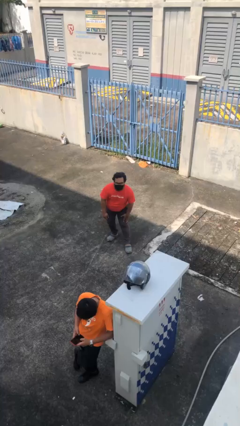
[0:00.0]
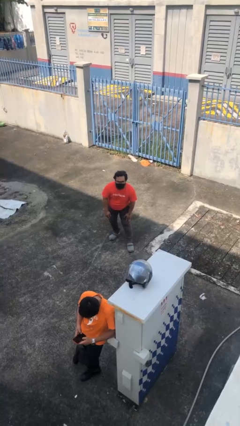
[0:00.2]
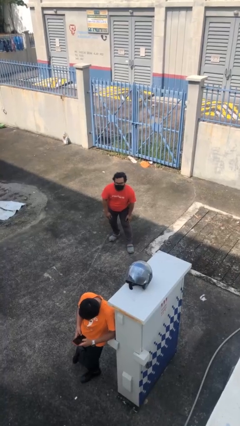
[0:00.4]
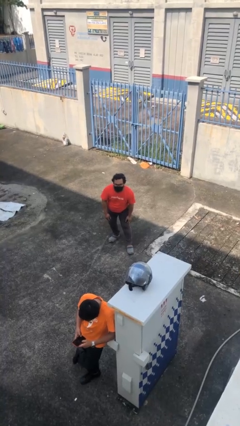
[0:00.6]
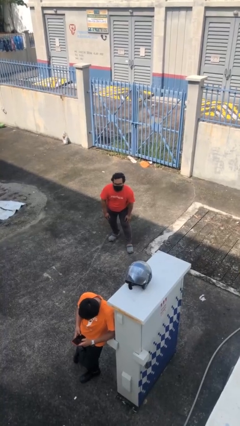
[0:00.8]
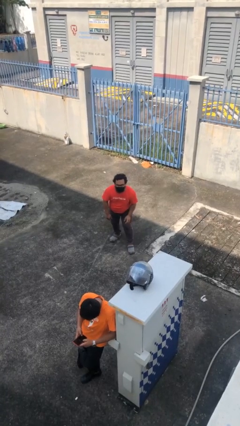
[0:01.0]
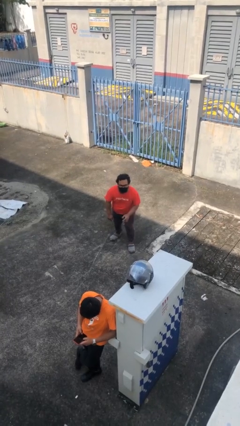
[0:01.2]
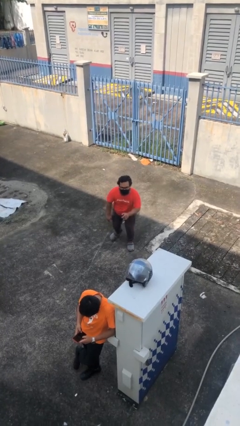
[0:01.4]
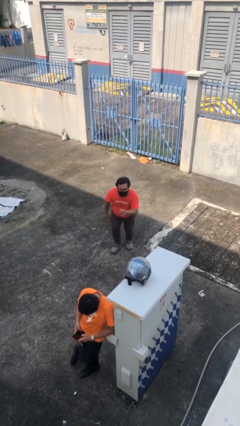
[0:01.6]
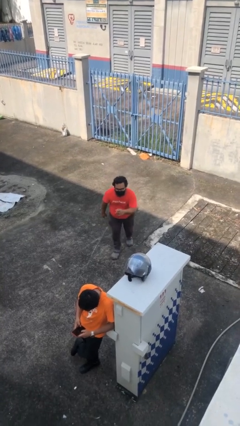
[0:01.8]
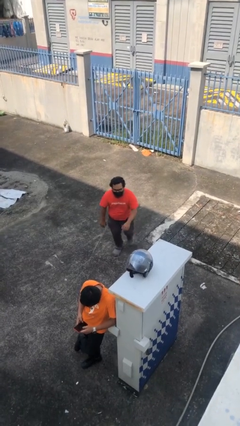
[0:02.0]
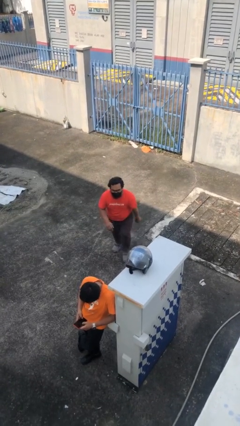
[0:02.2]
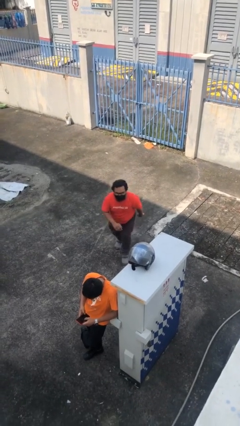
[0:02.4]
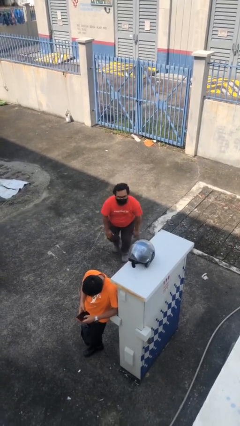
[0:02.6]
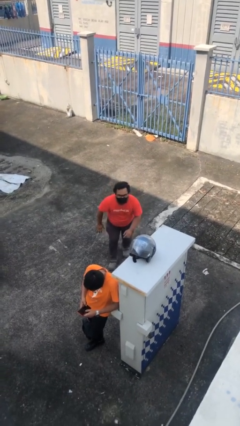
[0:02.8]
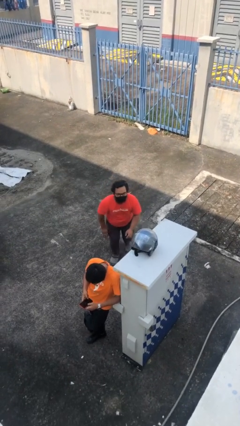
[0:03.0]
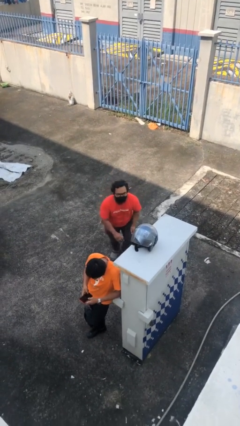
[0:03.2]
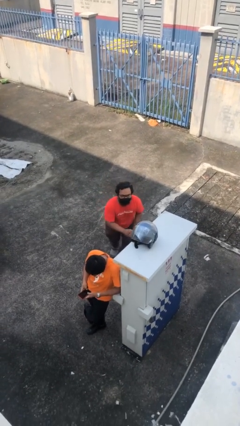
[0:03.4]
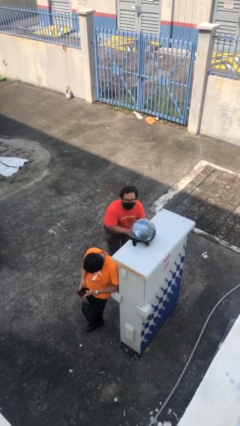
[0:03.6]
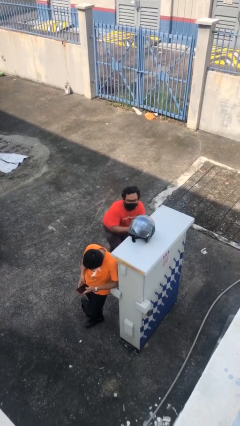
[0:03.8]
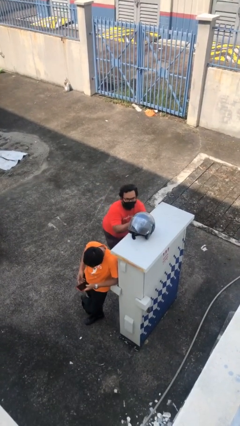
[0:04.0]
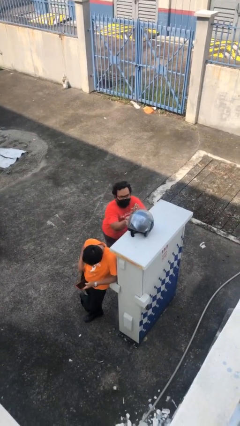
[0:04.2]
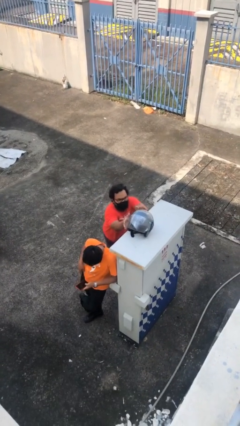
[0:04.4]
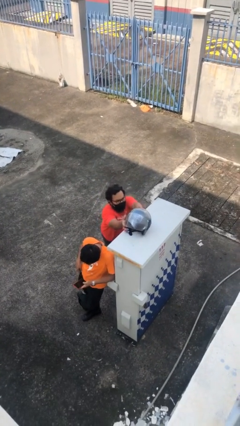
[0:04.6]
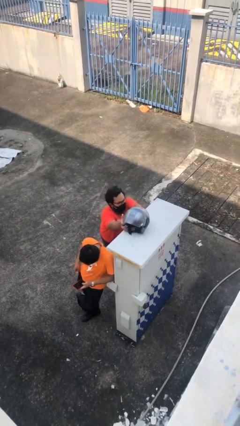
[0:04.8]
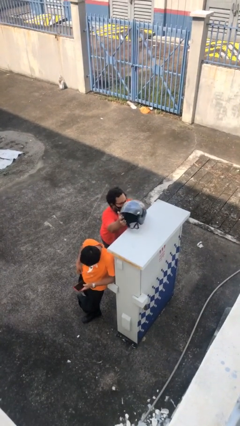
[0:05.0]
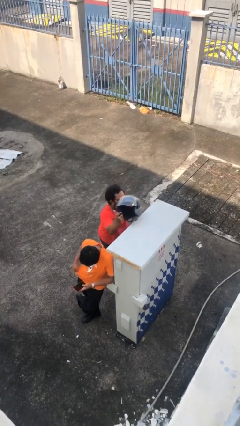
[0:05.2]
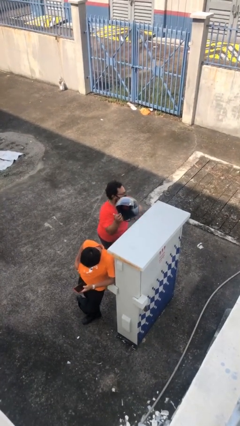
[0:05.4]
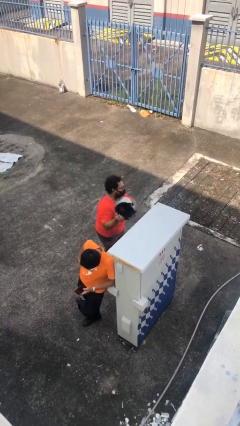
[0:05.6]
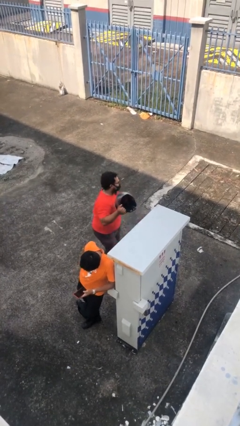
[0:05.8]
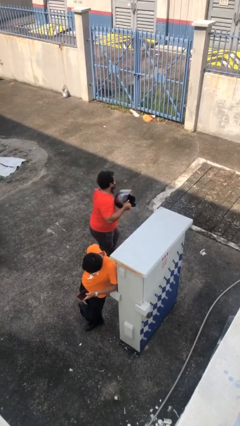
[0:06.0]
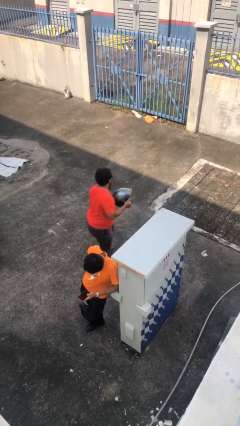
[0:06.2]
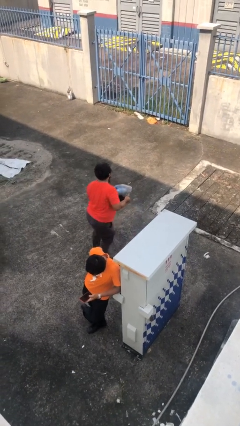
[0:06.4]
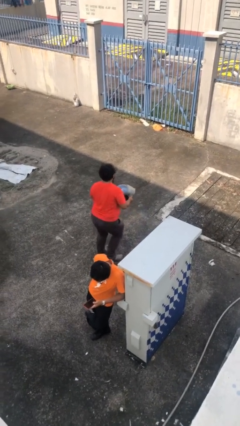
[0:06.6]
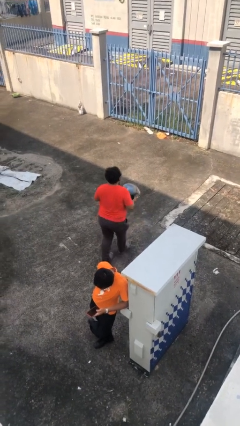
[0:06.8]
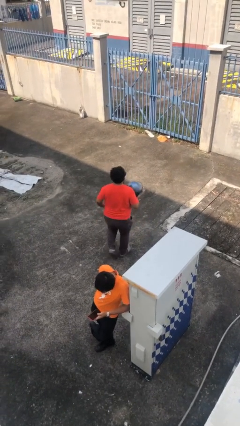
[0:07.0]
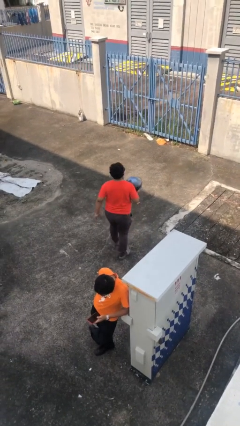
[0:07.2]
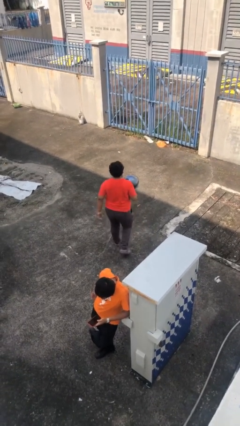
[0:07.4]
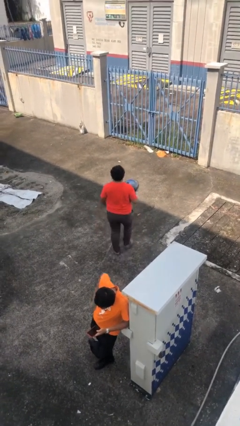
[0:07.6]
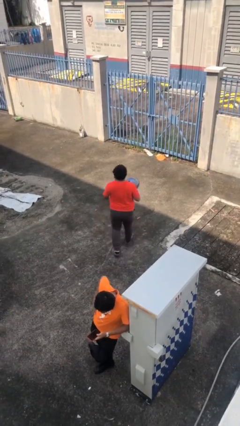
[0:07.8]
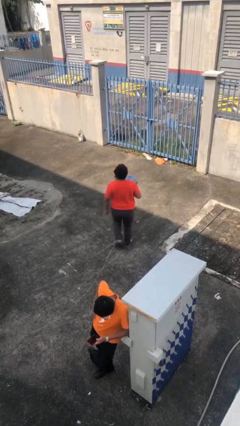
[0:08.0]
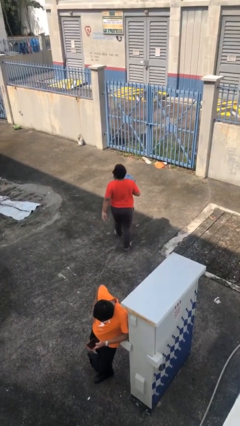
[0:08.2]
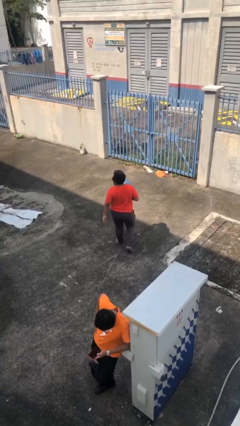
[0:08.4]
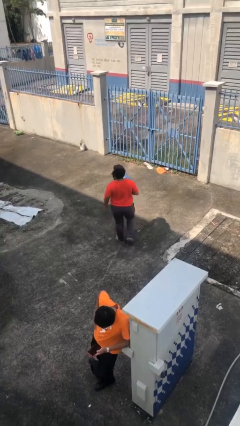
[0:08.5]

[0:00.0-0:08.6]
person steals object from person

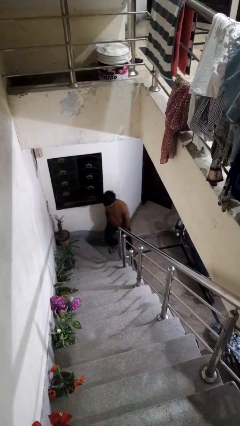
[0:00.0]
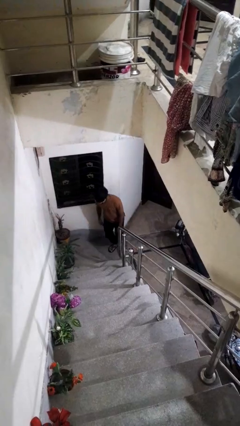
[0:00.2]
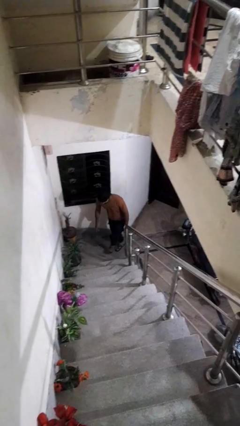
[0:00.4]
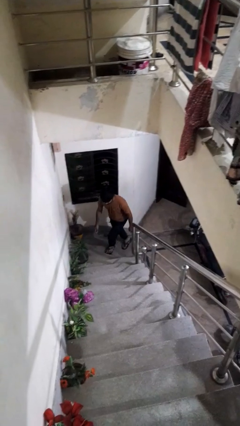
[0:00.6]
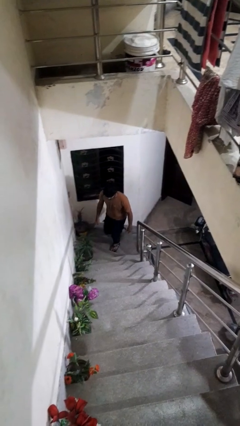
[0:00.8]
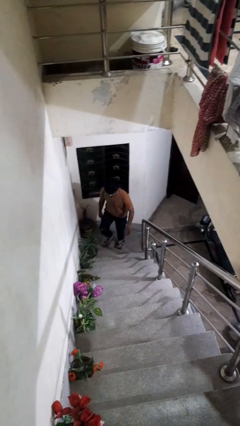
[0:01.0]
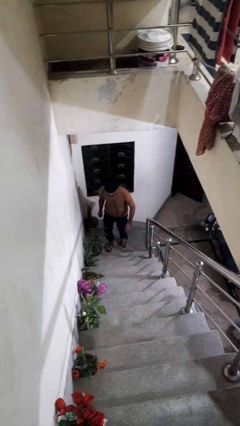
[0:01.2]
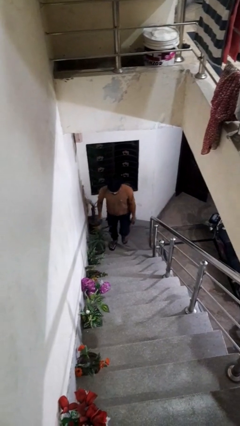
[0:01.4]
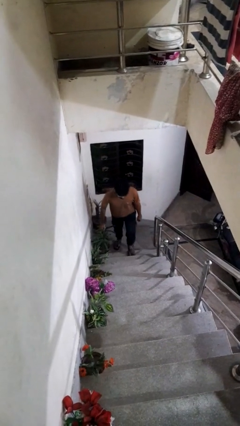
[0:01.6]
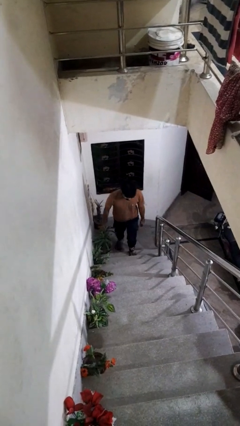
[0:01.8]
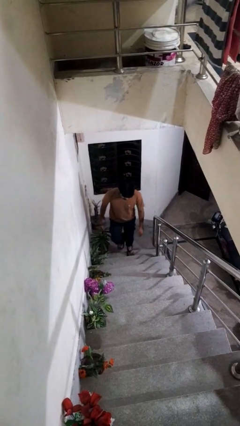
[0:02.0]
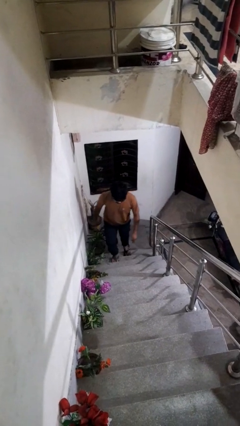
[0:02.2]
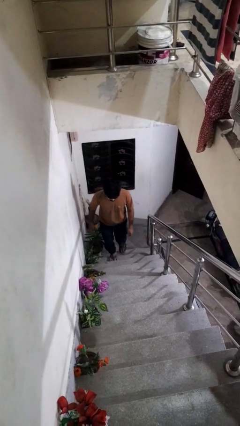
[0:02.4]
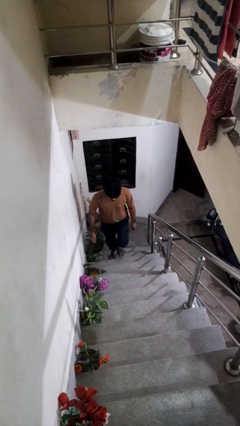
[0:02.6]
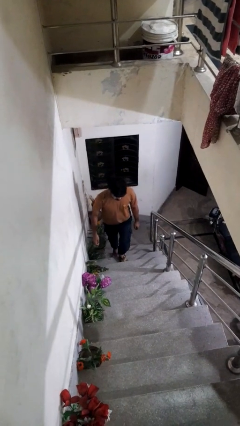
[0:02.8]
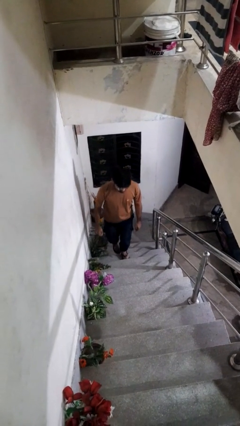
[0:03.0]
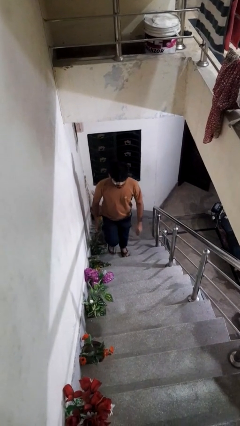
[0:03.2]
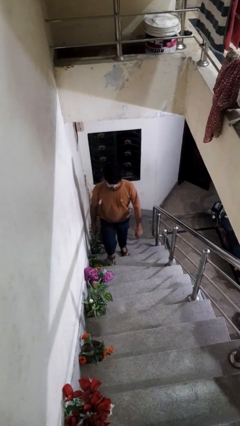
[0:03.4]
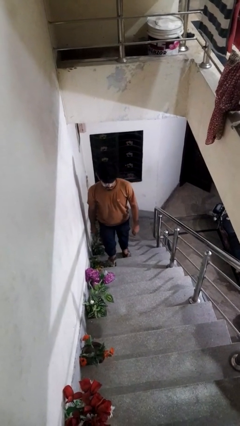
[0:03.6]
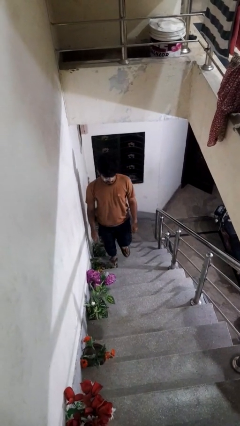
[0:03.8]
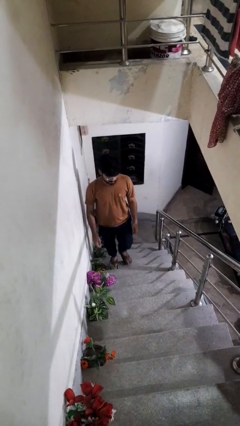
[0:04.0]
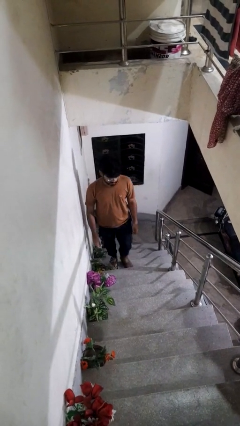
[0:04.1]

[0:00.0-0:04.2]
person climbs up stairs

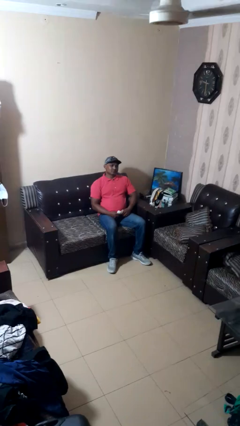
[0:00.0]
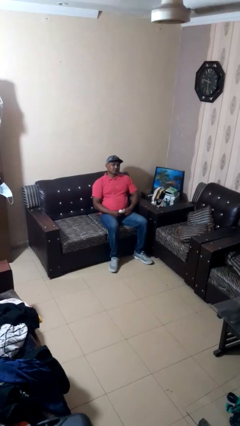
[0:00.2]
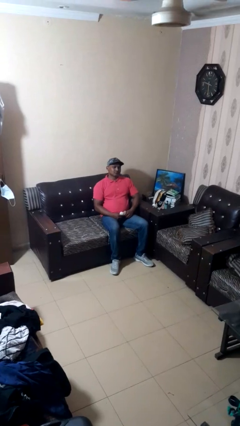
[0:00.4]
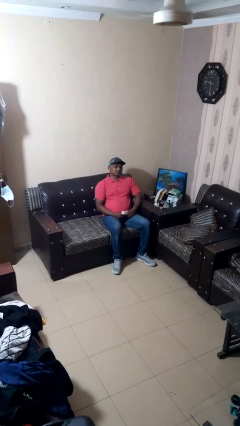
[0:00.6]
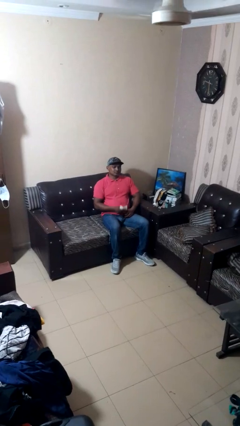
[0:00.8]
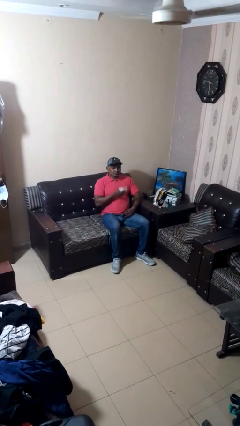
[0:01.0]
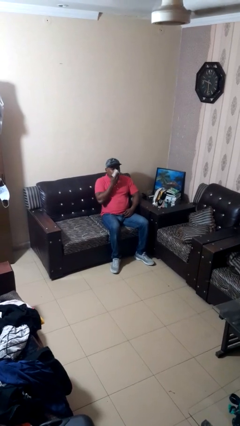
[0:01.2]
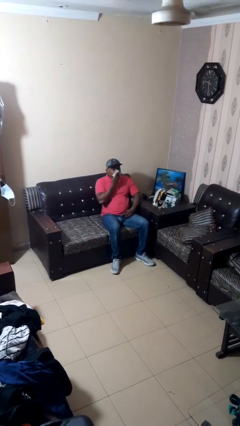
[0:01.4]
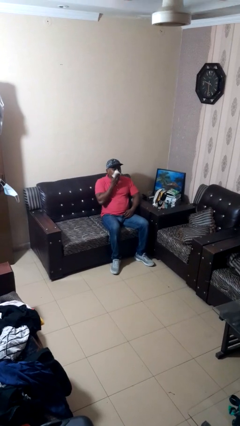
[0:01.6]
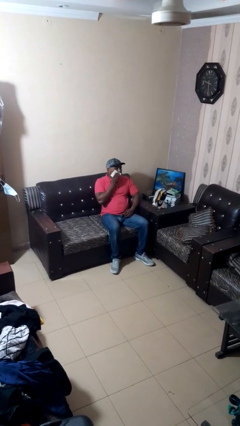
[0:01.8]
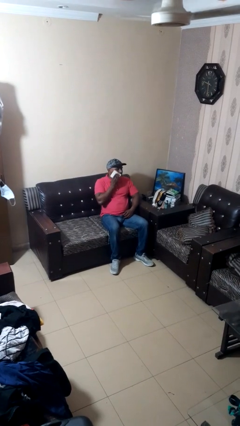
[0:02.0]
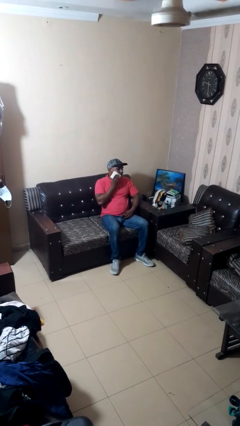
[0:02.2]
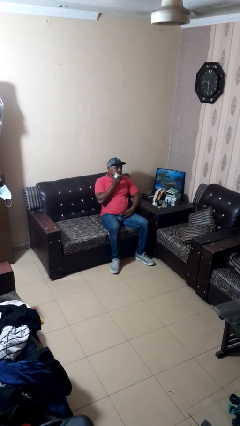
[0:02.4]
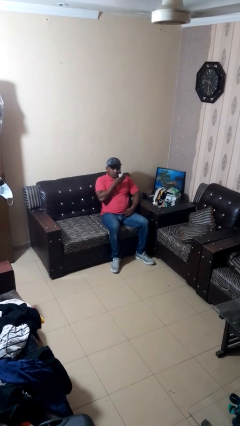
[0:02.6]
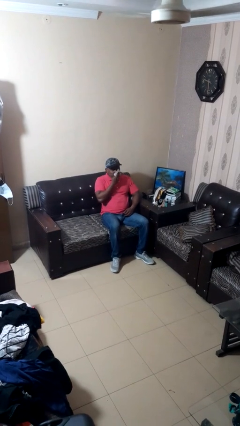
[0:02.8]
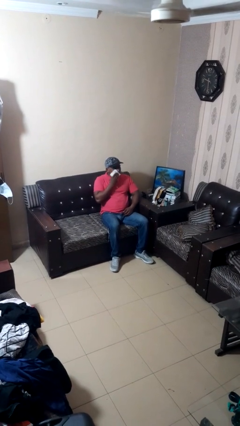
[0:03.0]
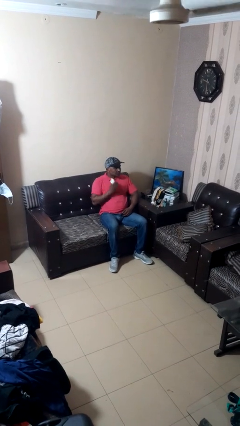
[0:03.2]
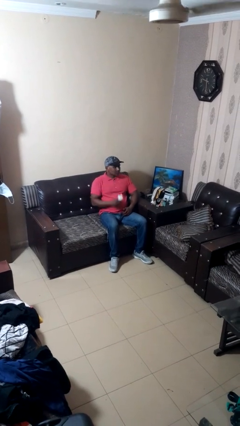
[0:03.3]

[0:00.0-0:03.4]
person wipes mouth with napkin

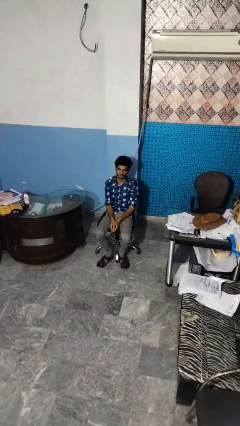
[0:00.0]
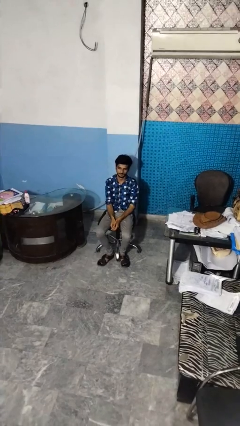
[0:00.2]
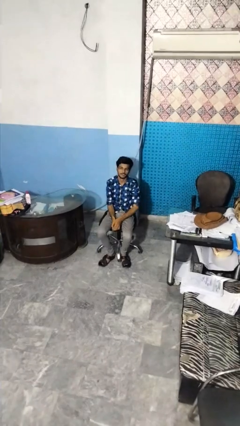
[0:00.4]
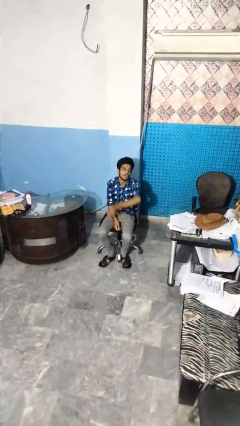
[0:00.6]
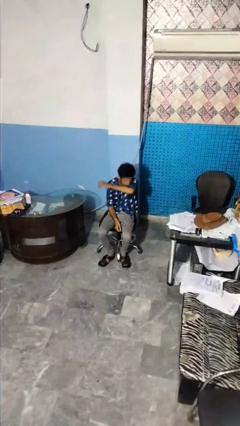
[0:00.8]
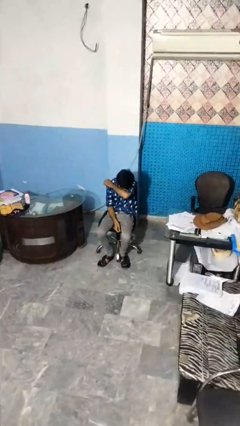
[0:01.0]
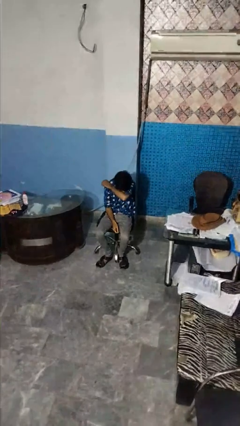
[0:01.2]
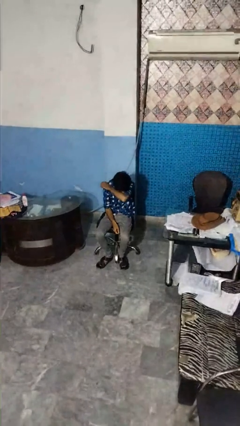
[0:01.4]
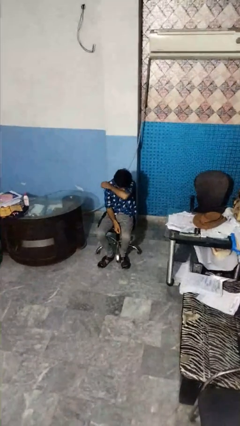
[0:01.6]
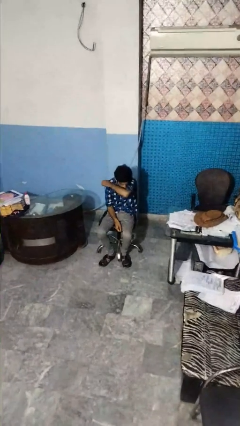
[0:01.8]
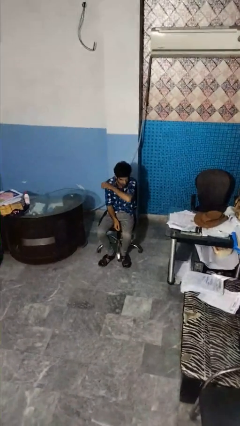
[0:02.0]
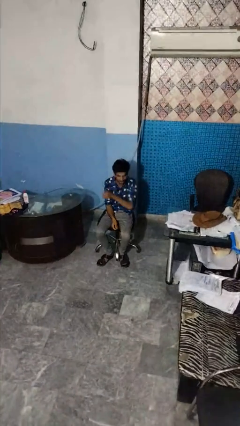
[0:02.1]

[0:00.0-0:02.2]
person sneezes into arm
